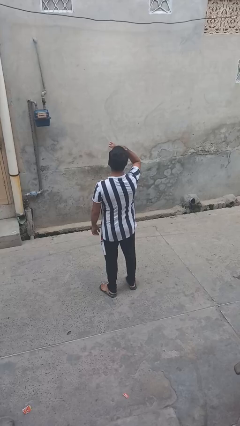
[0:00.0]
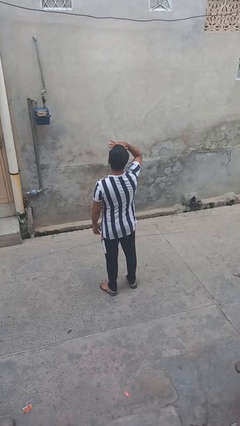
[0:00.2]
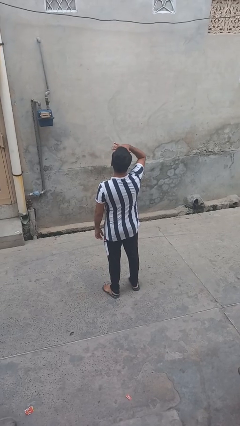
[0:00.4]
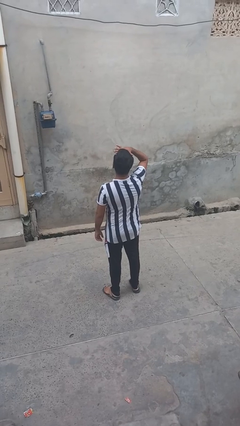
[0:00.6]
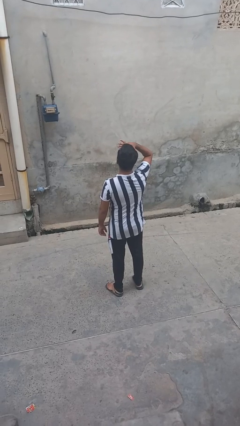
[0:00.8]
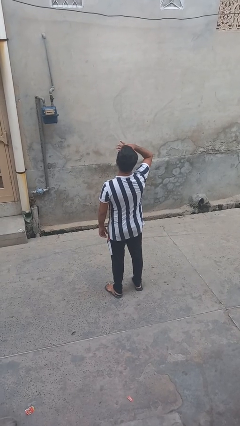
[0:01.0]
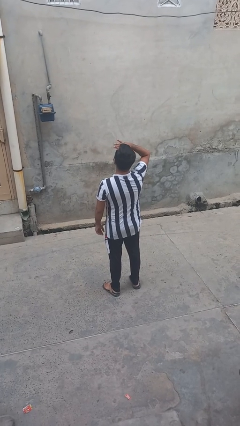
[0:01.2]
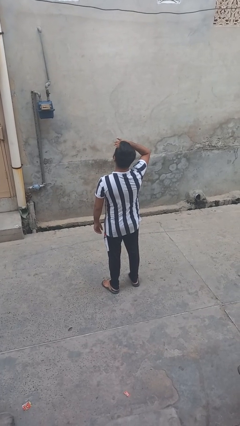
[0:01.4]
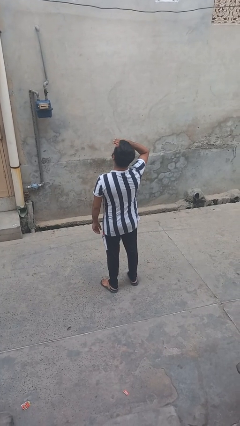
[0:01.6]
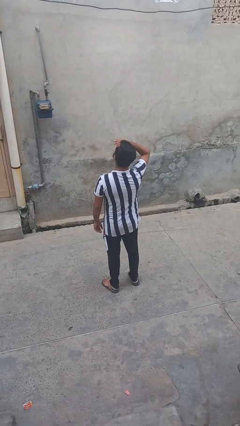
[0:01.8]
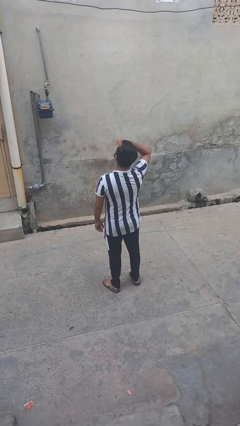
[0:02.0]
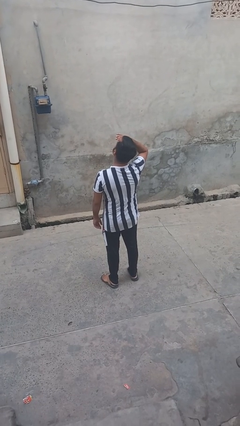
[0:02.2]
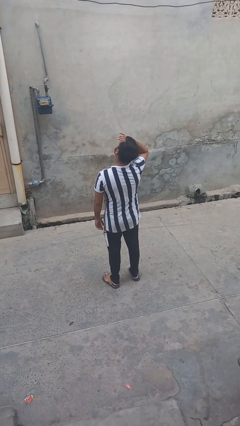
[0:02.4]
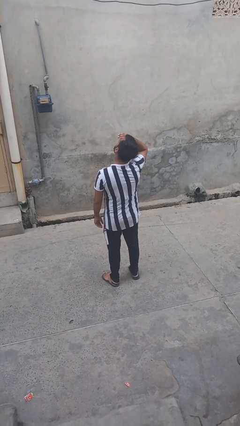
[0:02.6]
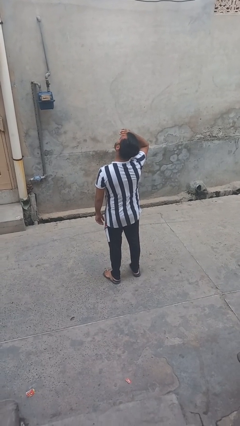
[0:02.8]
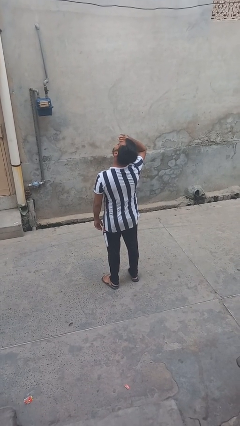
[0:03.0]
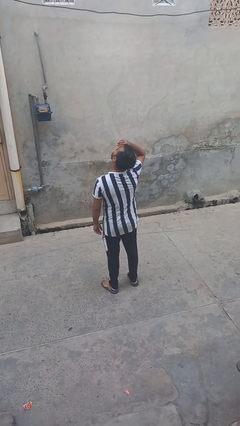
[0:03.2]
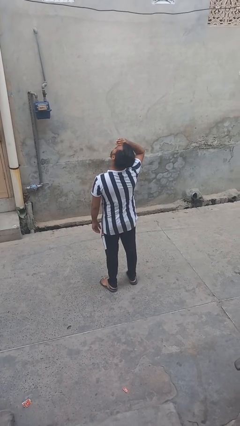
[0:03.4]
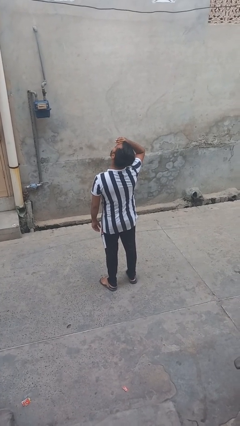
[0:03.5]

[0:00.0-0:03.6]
person shades eyes

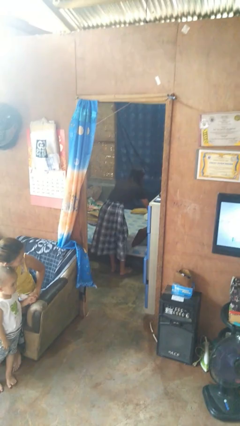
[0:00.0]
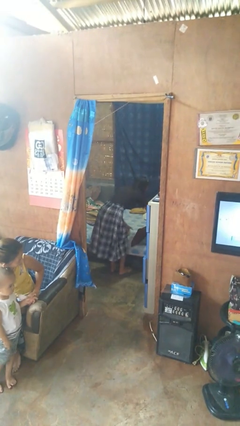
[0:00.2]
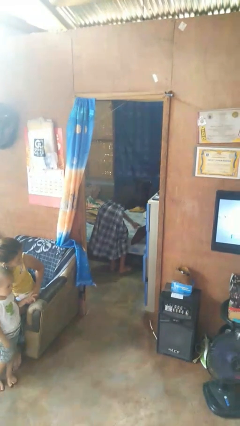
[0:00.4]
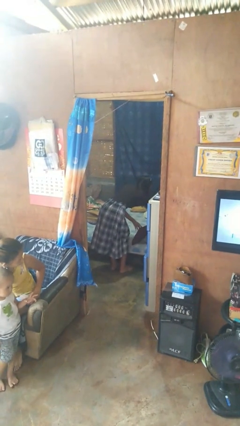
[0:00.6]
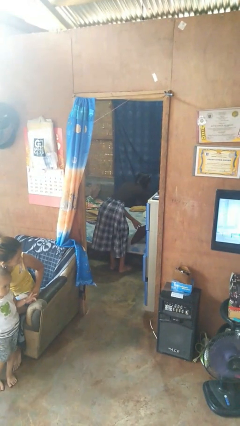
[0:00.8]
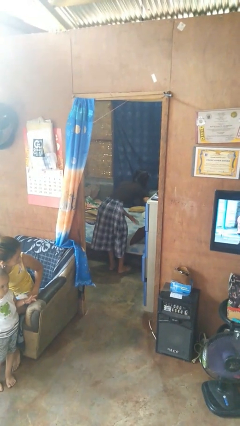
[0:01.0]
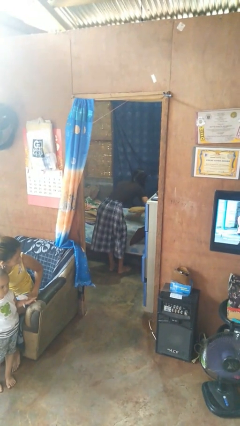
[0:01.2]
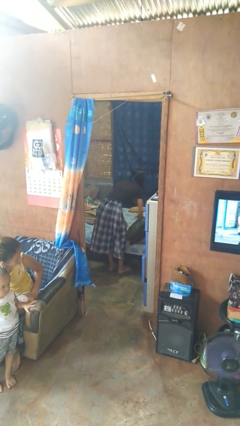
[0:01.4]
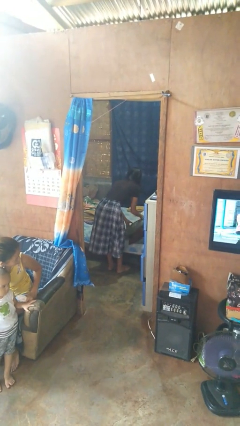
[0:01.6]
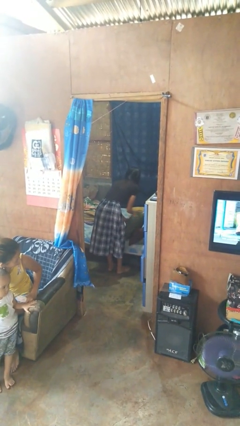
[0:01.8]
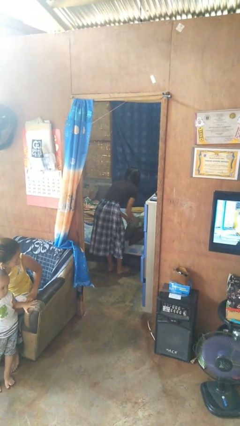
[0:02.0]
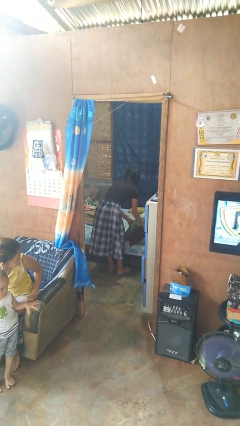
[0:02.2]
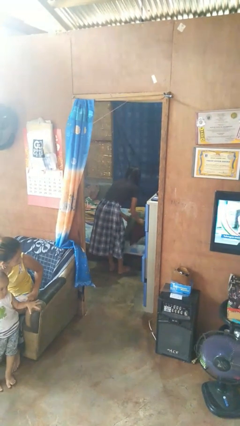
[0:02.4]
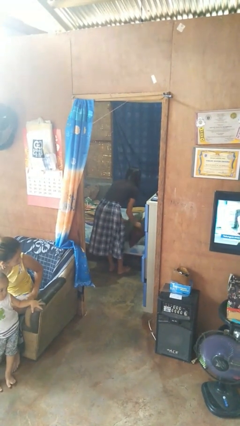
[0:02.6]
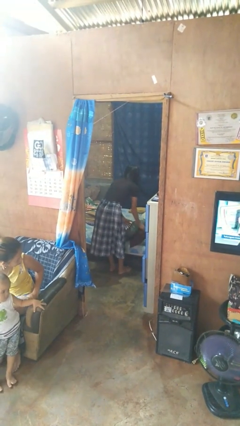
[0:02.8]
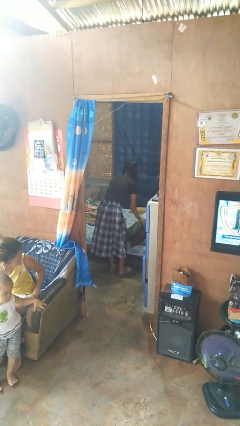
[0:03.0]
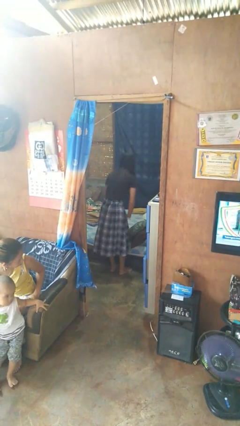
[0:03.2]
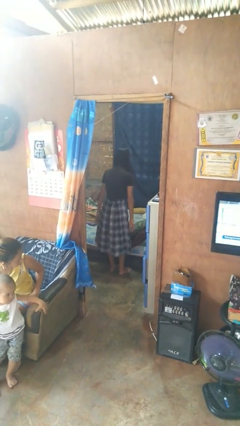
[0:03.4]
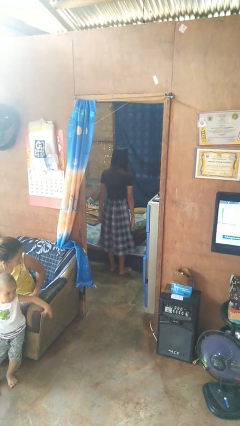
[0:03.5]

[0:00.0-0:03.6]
person makes bed

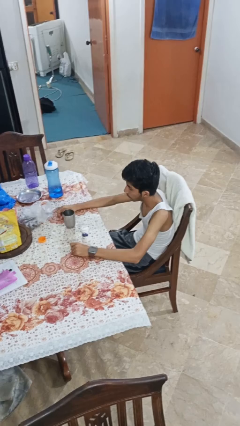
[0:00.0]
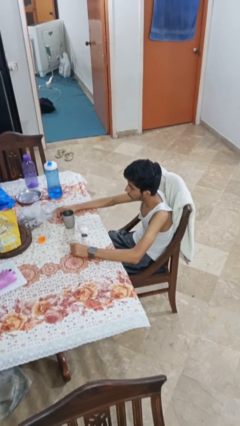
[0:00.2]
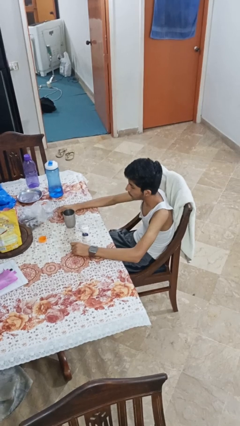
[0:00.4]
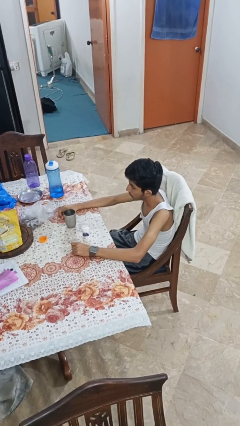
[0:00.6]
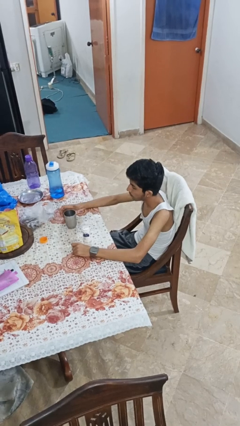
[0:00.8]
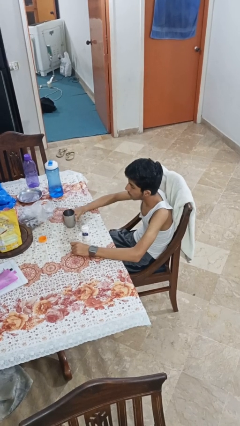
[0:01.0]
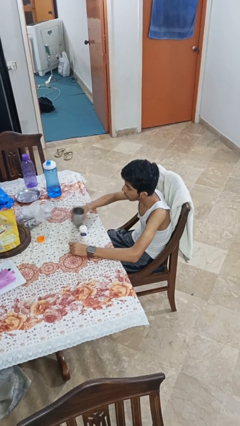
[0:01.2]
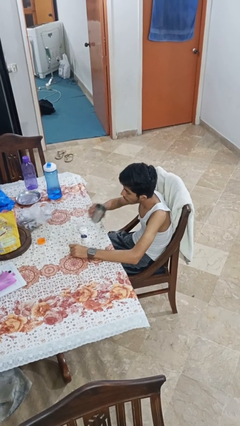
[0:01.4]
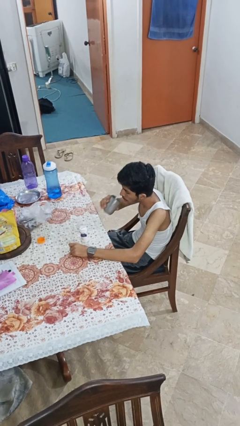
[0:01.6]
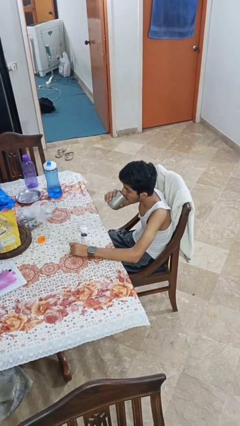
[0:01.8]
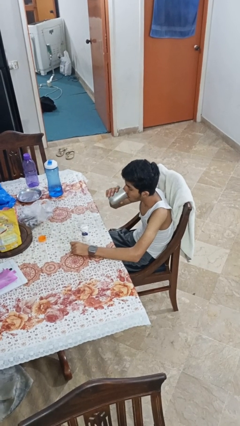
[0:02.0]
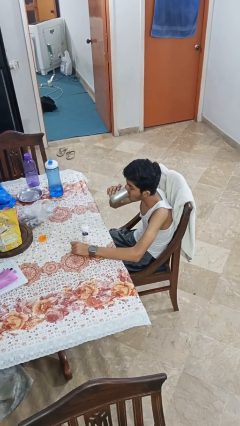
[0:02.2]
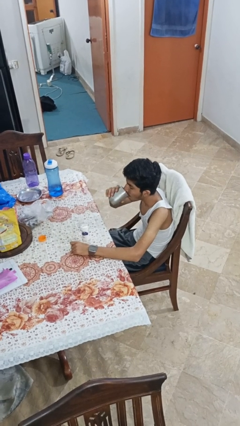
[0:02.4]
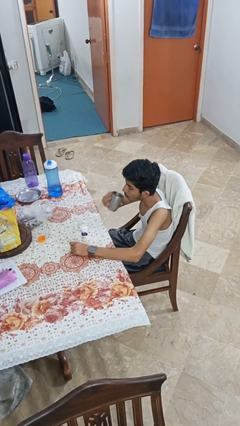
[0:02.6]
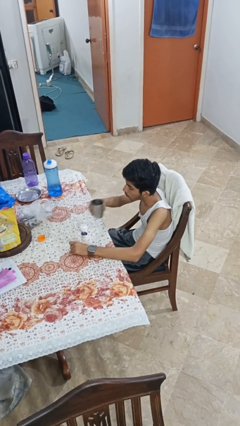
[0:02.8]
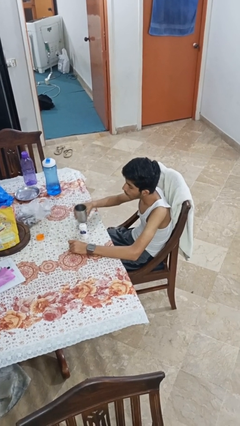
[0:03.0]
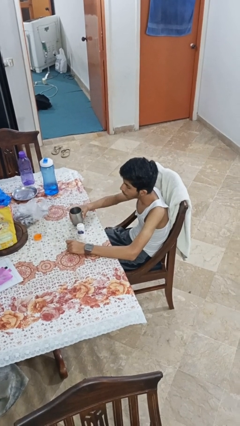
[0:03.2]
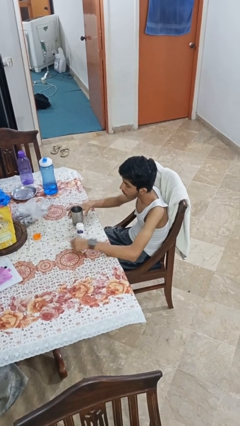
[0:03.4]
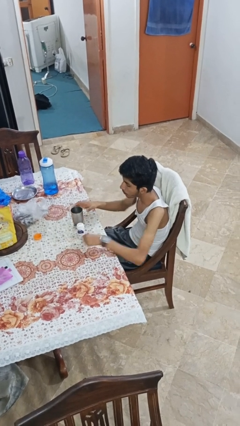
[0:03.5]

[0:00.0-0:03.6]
person drinks from cup

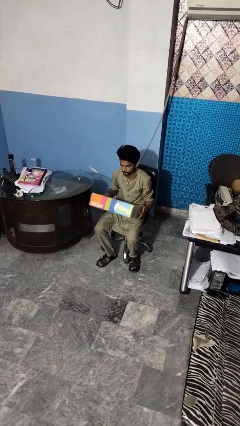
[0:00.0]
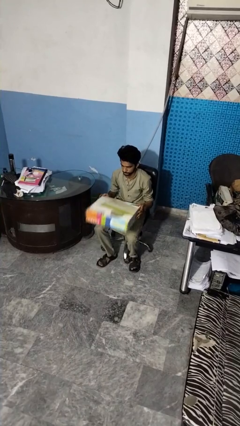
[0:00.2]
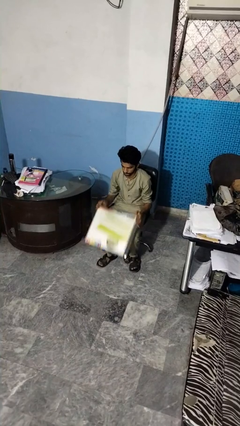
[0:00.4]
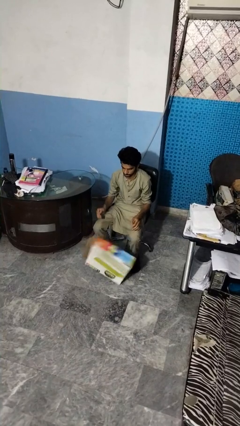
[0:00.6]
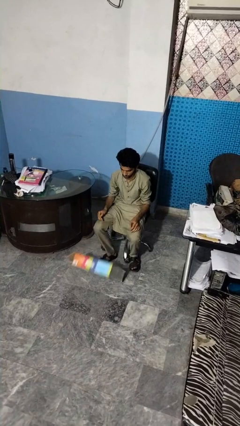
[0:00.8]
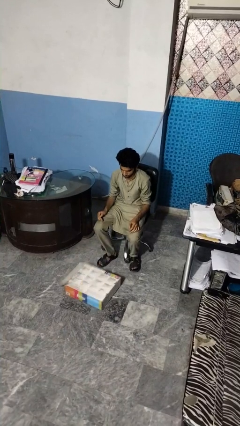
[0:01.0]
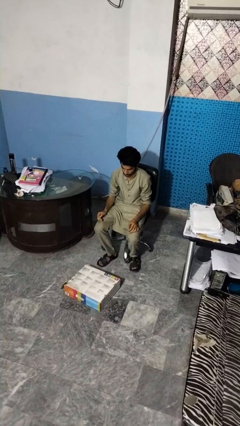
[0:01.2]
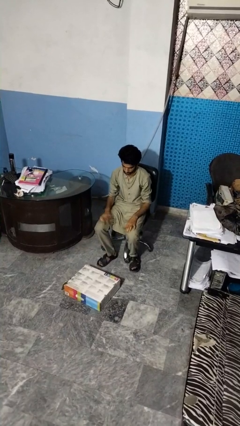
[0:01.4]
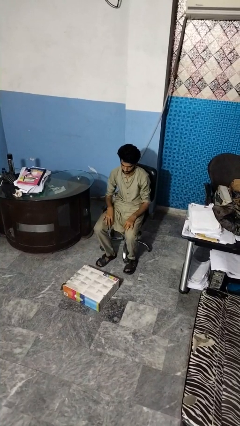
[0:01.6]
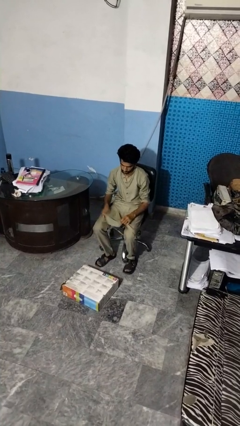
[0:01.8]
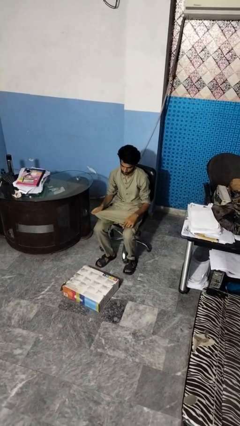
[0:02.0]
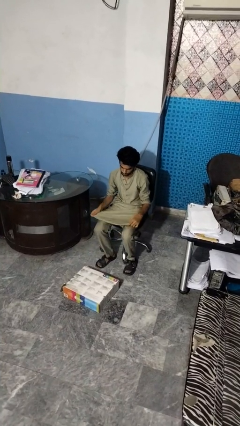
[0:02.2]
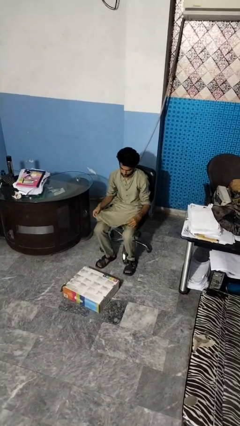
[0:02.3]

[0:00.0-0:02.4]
person drops object

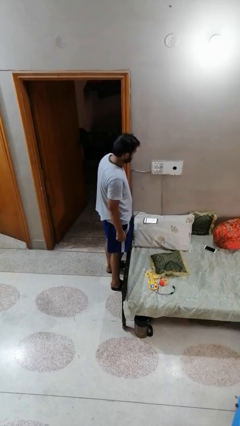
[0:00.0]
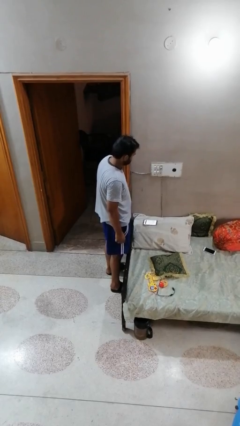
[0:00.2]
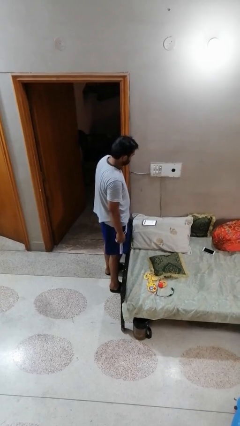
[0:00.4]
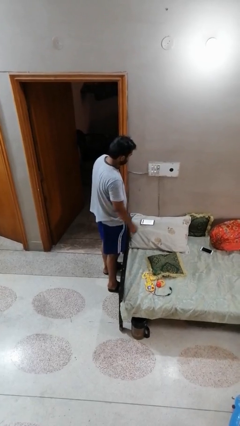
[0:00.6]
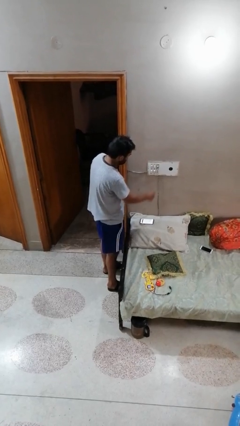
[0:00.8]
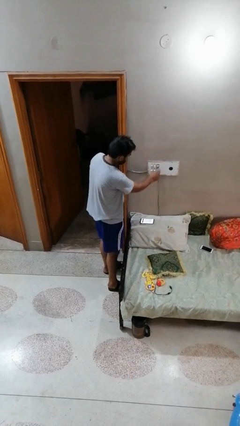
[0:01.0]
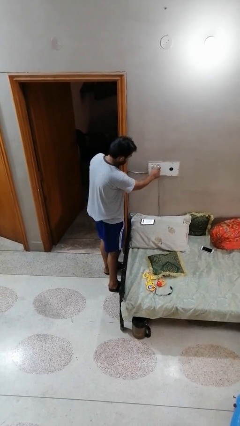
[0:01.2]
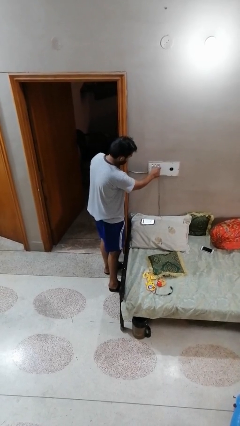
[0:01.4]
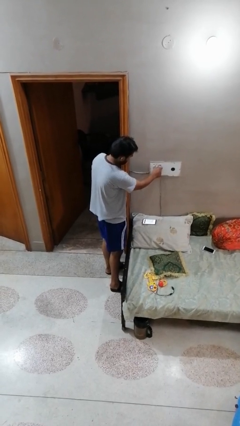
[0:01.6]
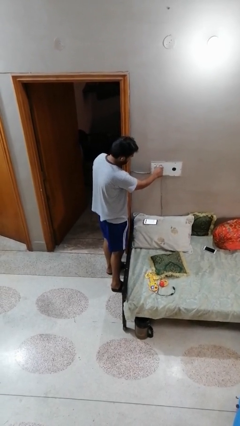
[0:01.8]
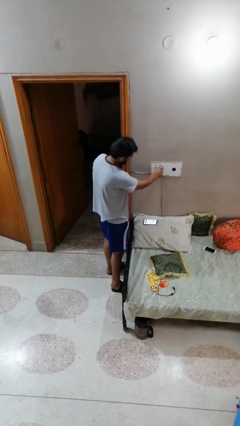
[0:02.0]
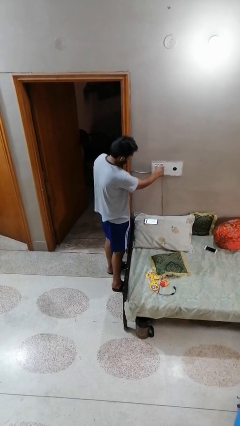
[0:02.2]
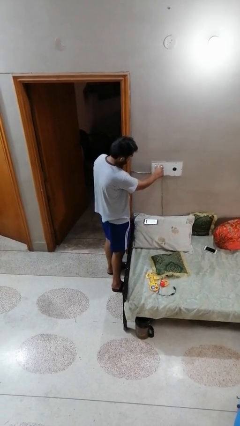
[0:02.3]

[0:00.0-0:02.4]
person adjusts thermostat

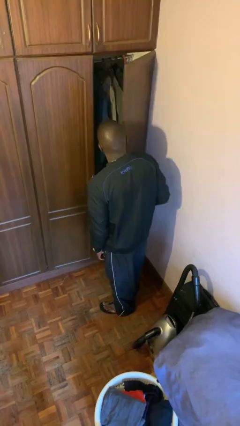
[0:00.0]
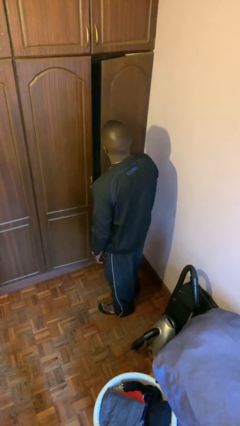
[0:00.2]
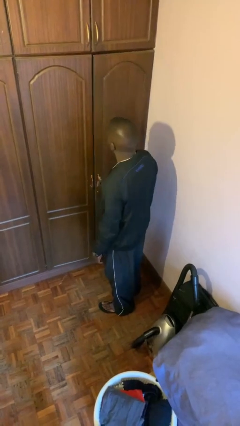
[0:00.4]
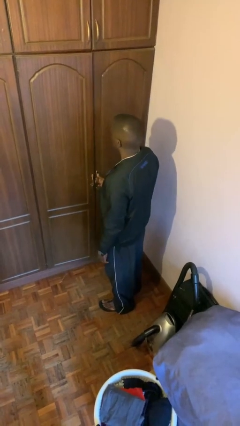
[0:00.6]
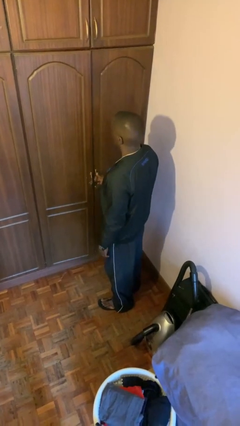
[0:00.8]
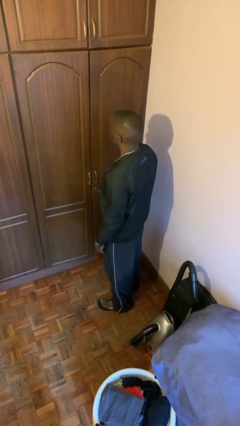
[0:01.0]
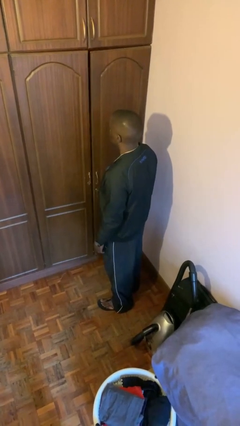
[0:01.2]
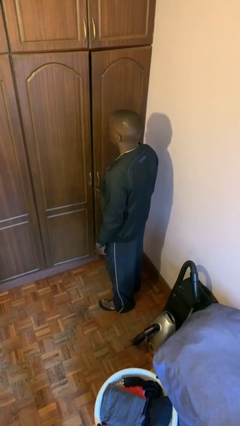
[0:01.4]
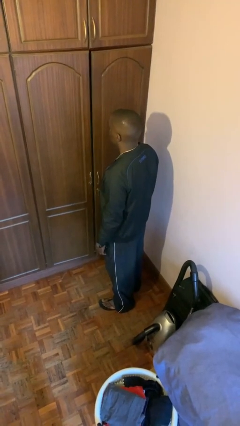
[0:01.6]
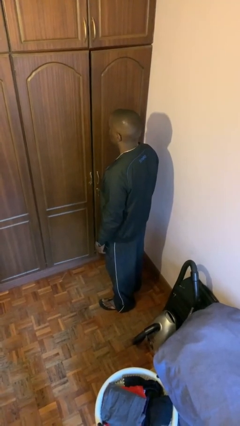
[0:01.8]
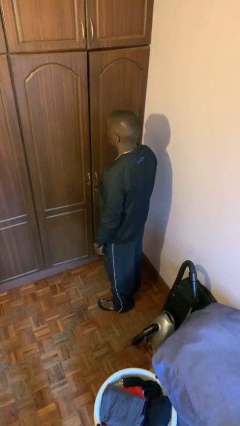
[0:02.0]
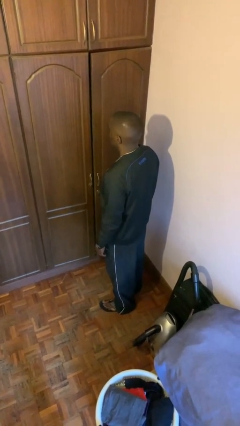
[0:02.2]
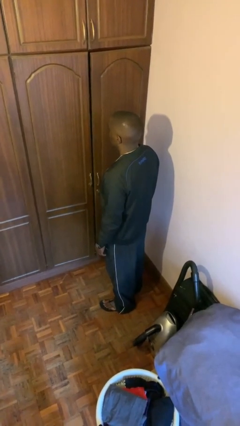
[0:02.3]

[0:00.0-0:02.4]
person closes closet door
